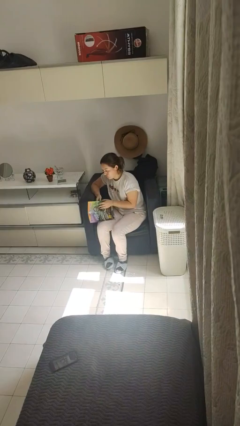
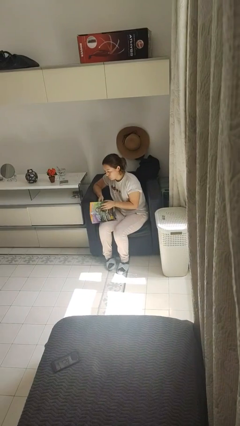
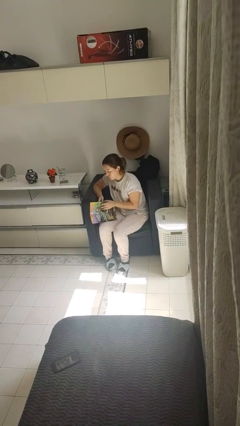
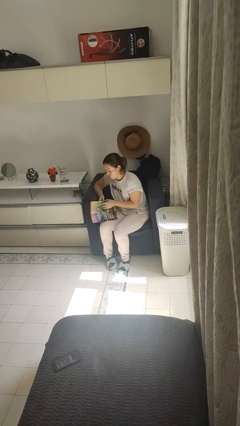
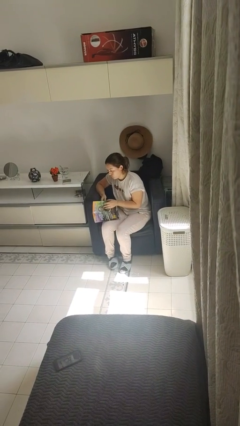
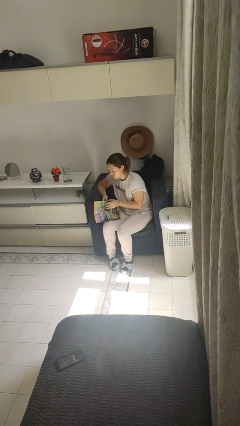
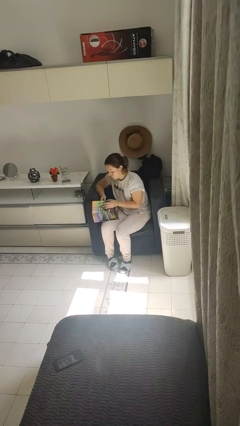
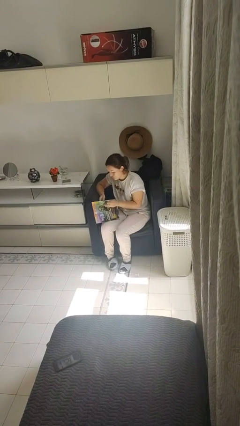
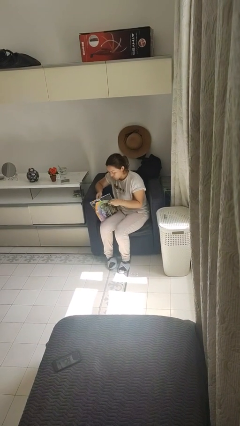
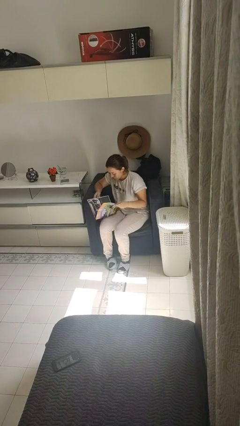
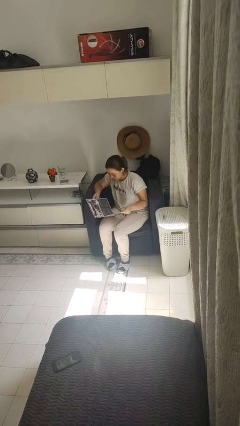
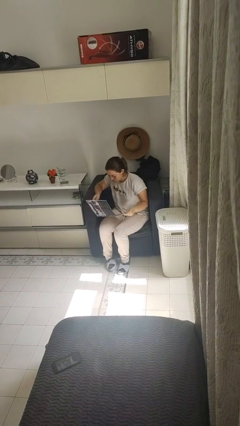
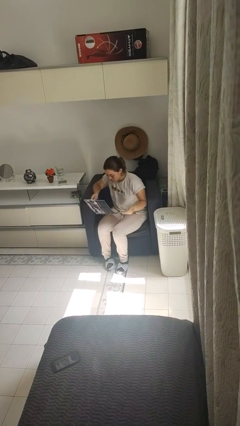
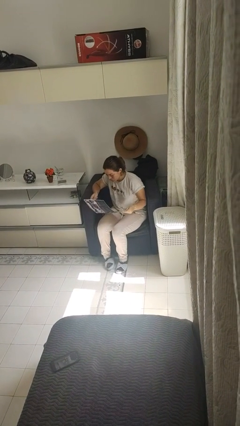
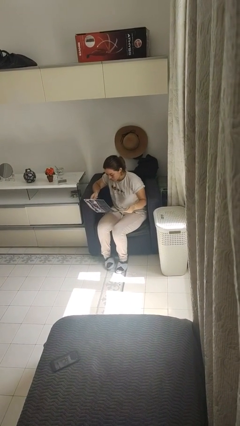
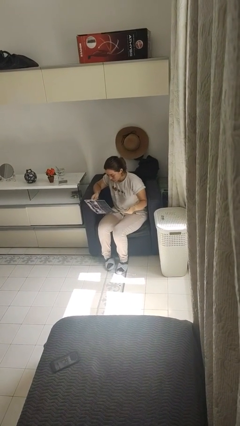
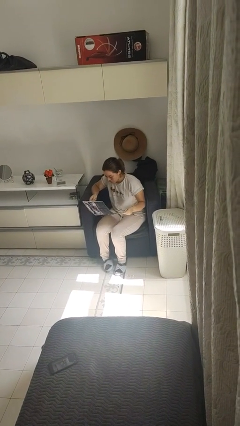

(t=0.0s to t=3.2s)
person reads newspaper

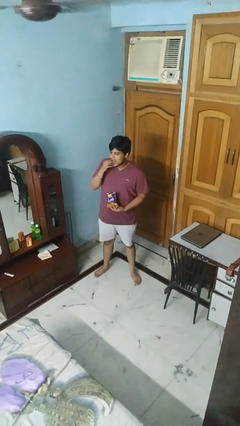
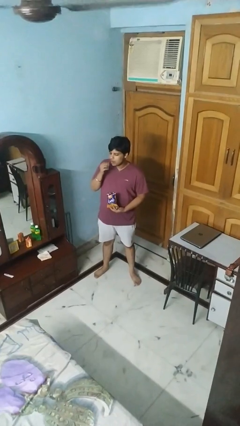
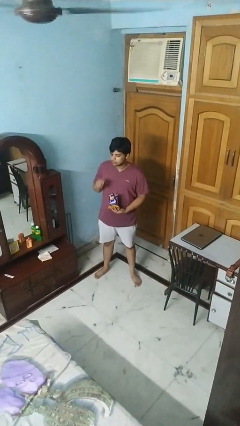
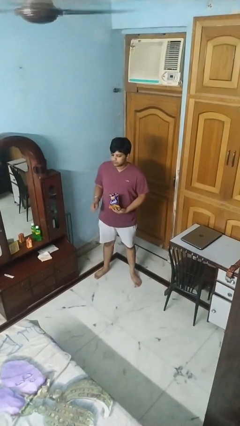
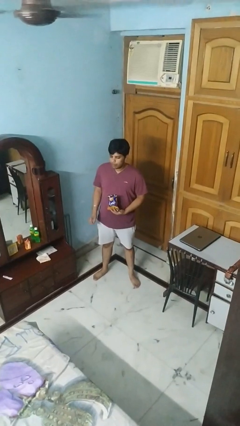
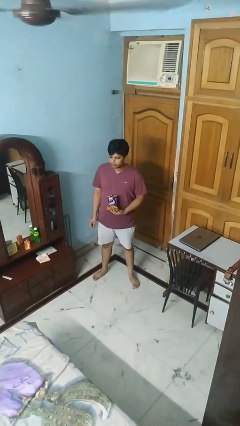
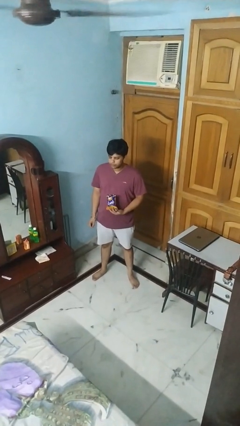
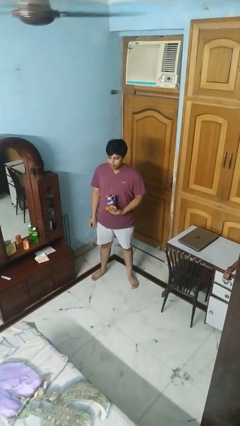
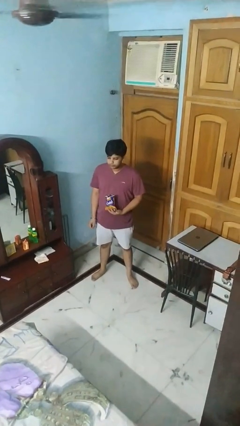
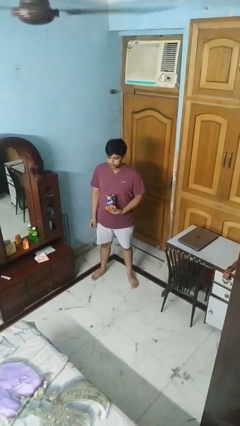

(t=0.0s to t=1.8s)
person eats snack from bag

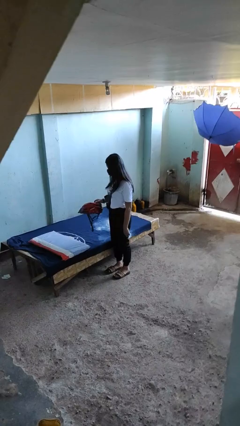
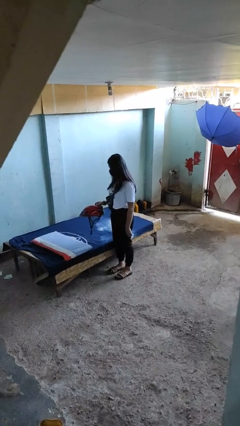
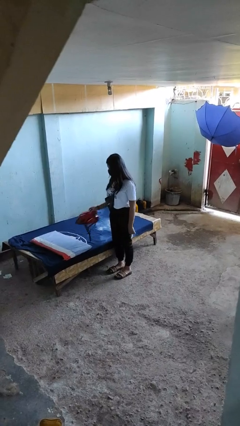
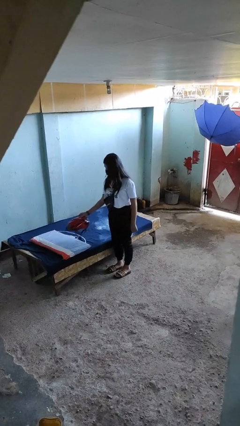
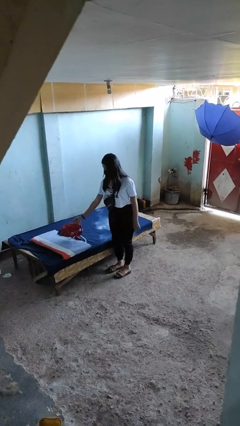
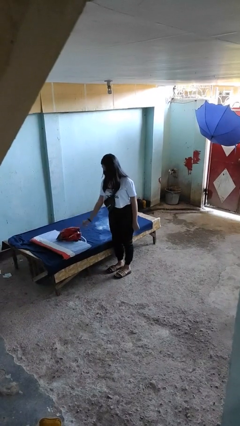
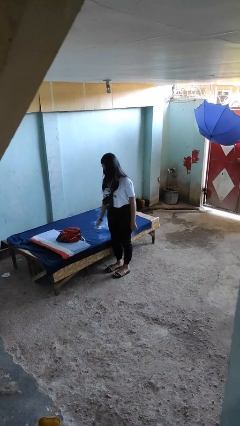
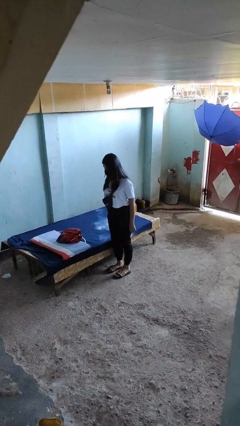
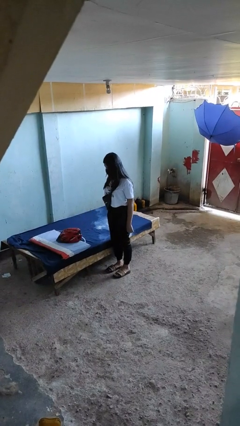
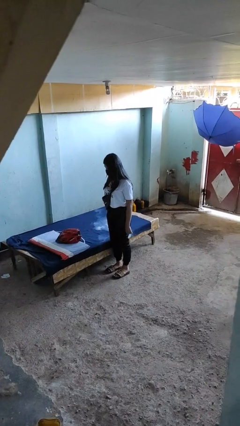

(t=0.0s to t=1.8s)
person puts down object on bed

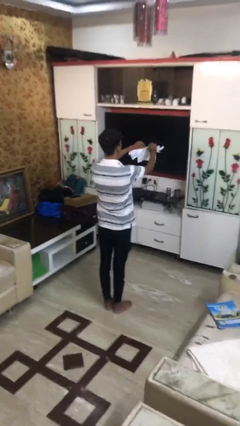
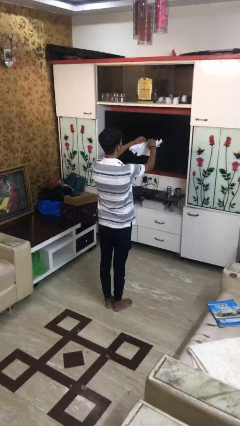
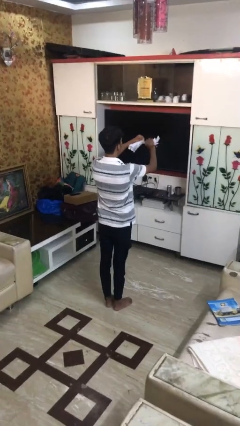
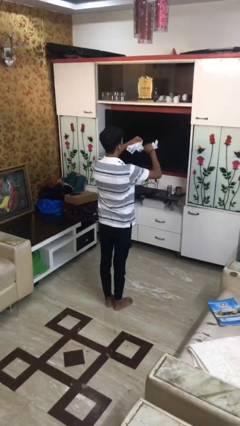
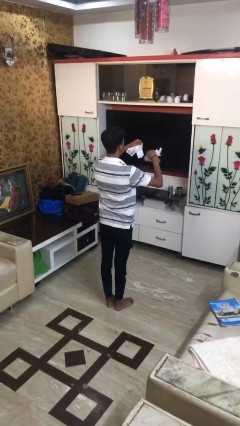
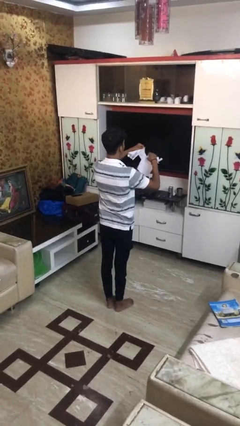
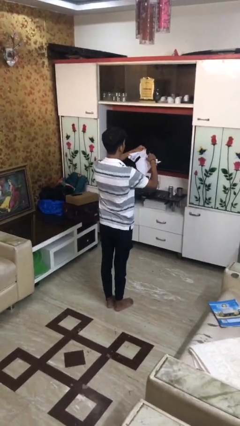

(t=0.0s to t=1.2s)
person tears paper

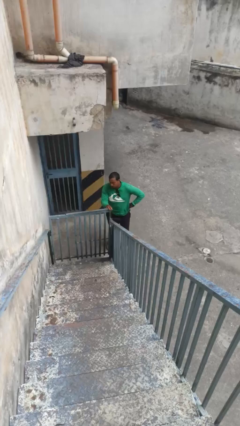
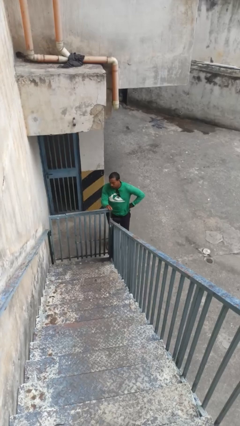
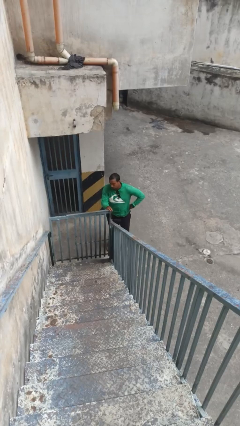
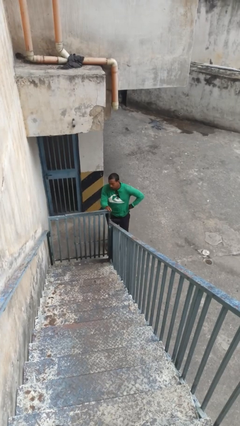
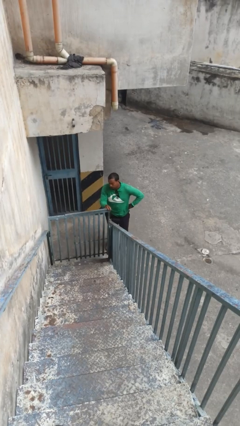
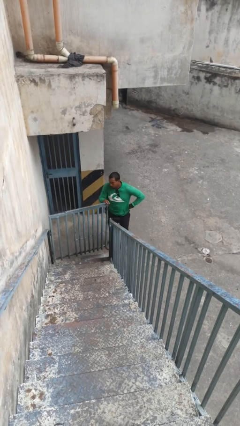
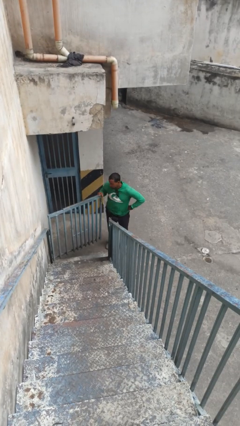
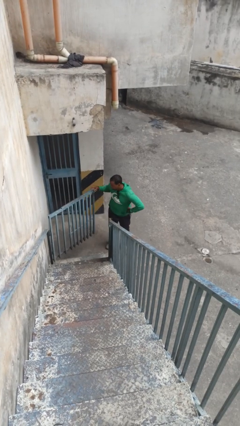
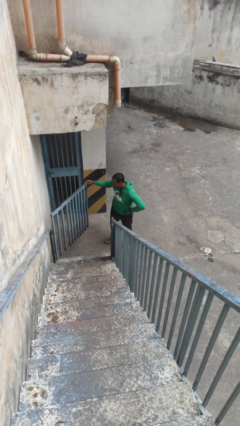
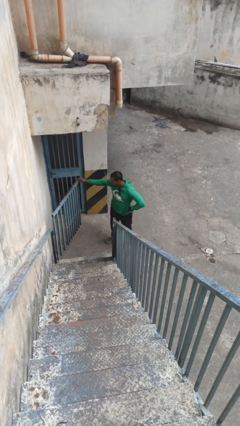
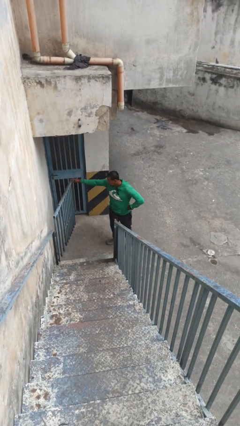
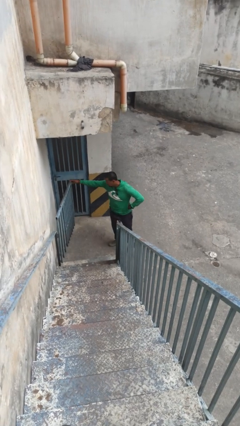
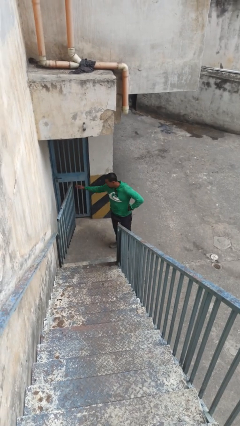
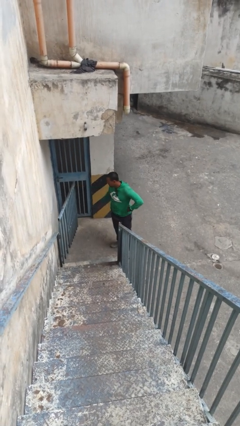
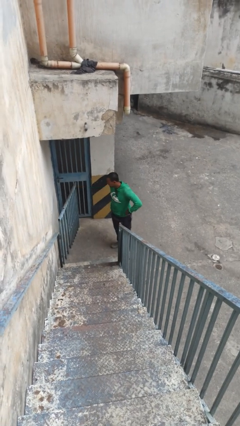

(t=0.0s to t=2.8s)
person opens facility door

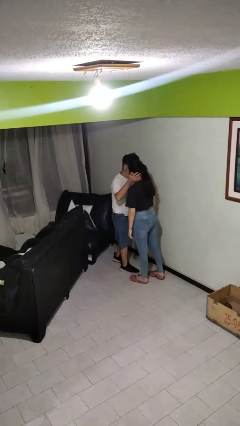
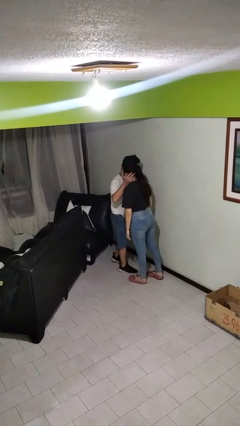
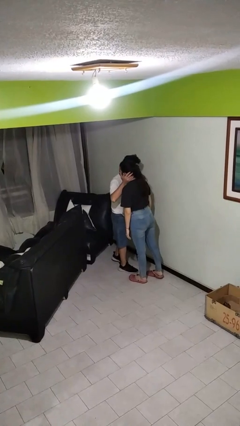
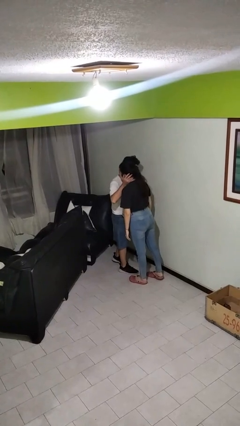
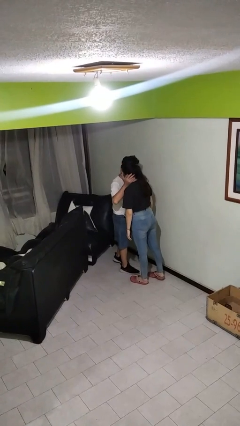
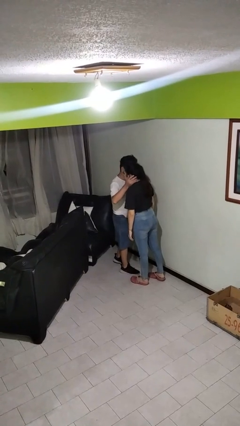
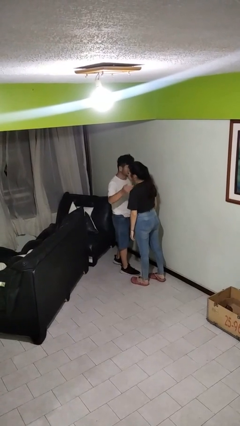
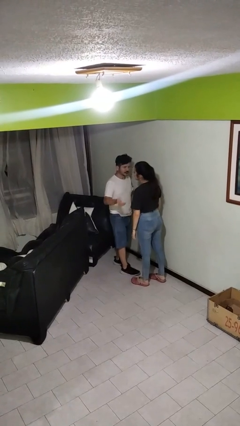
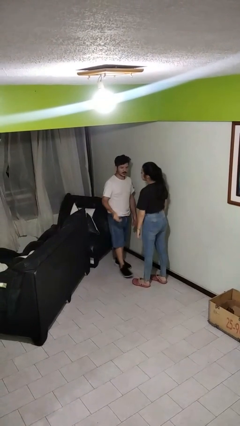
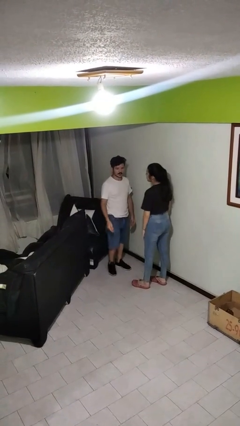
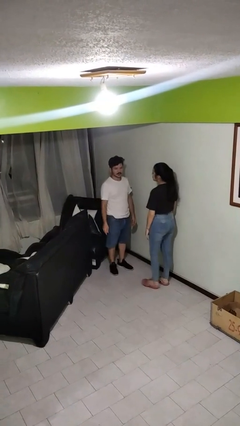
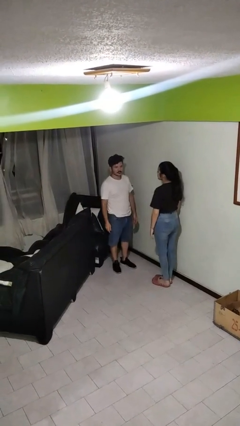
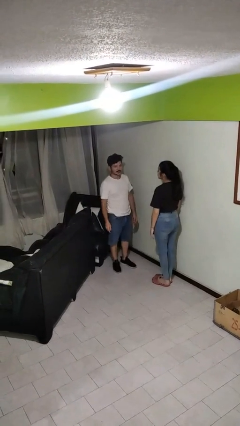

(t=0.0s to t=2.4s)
person kisses cheek of person

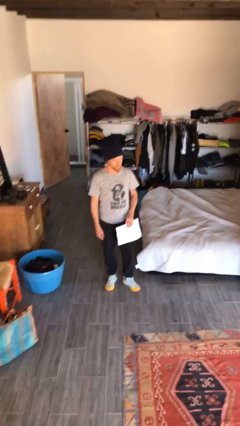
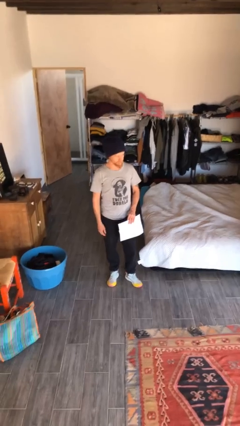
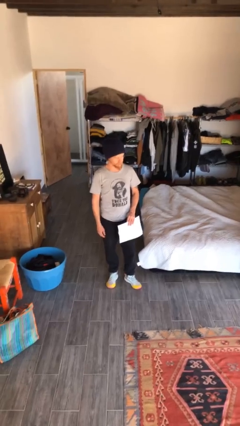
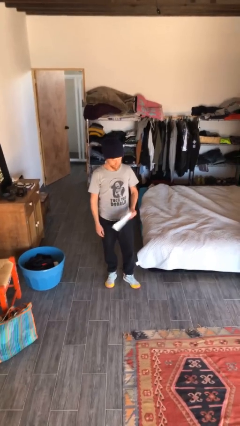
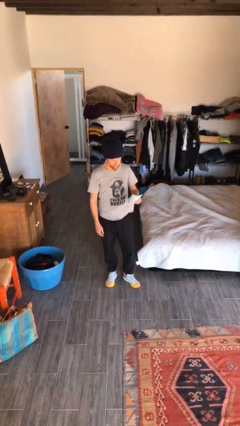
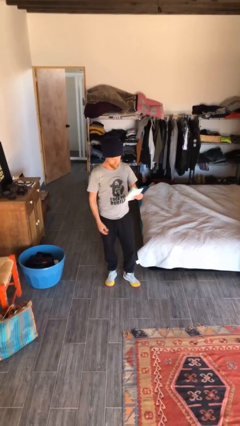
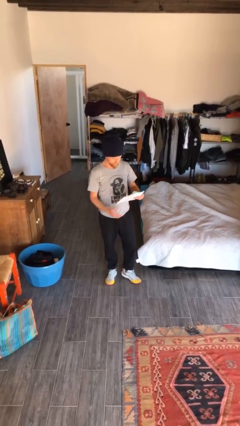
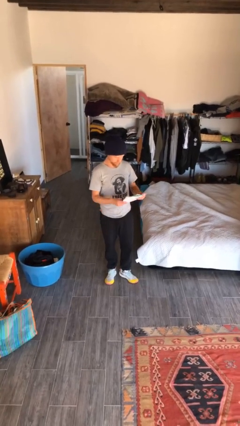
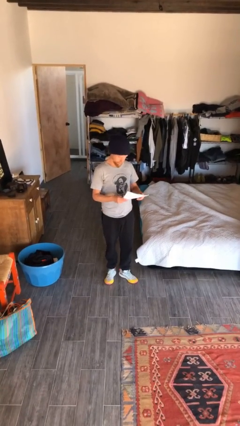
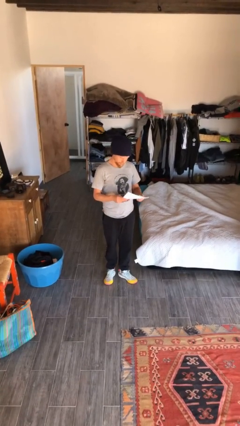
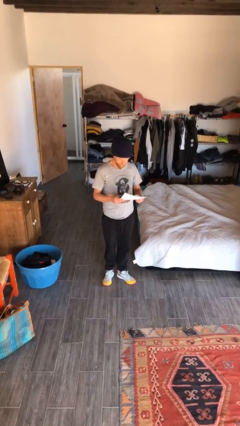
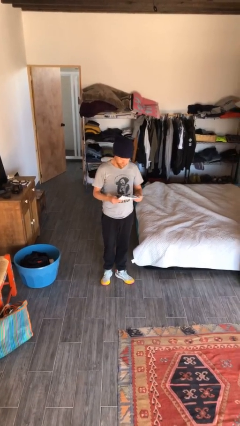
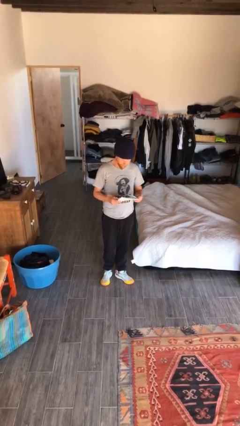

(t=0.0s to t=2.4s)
person reads document

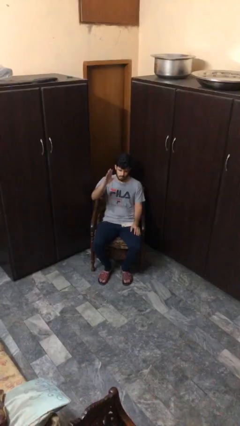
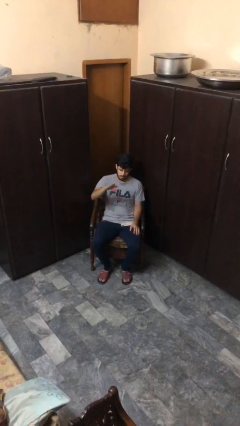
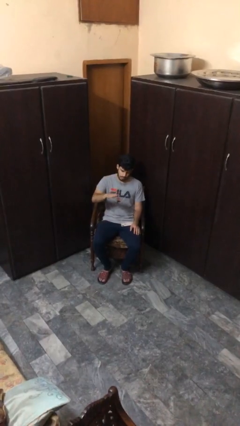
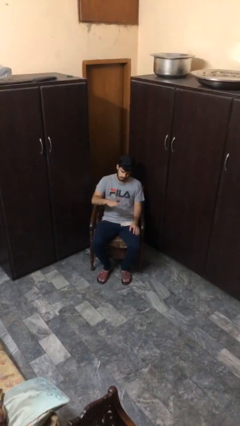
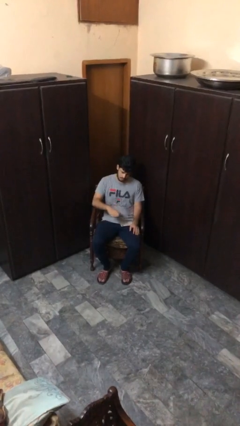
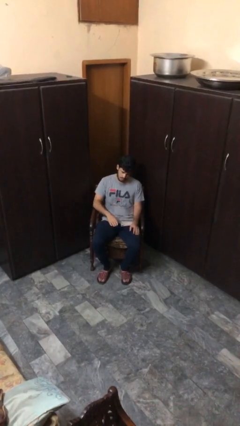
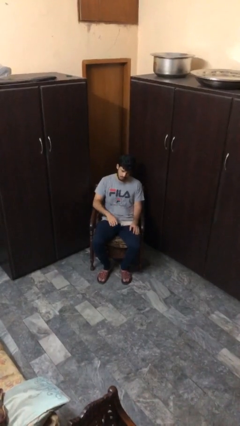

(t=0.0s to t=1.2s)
person gestures swipe down

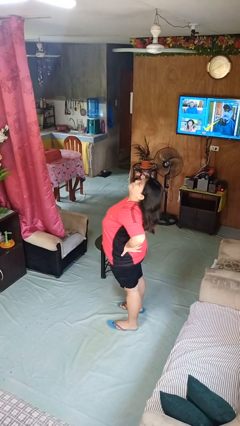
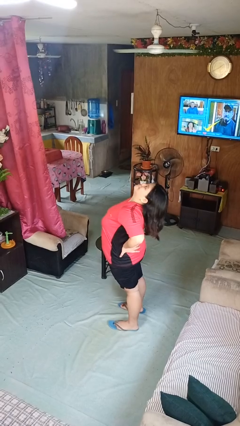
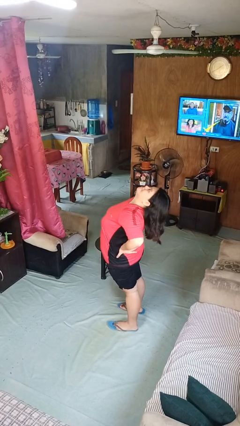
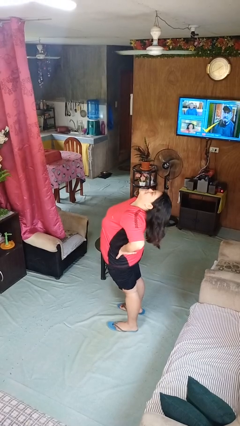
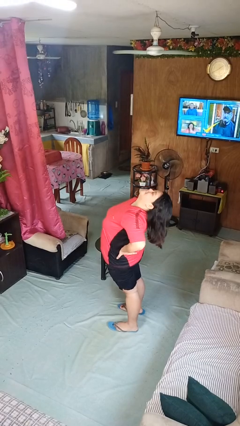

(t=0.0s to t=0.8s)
person stretches back
